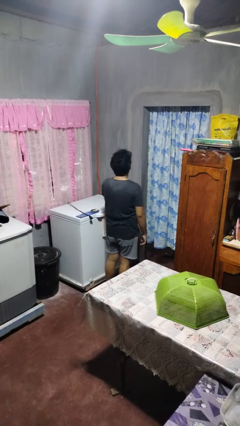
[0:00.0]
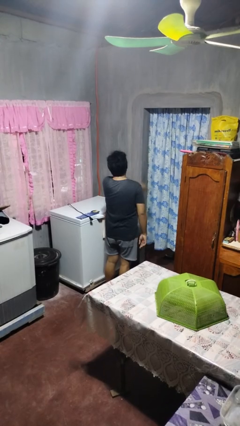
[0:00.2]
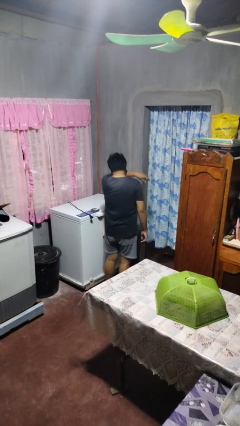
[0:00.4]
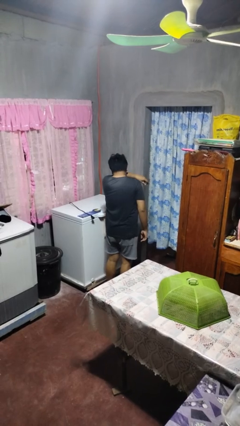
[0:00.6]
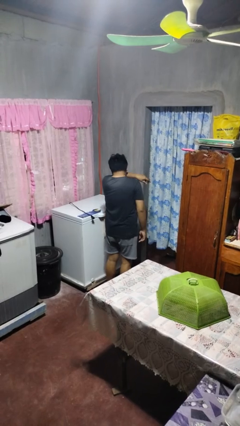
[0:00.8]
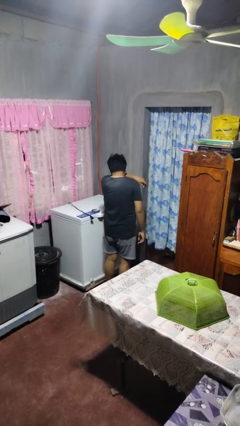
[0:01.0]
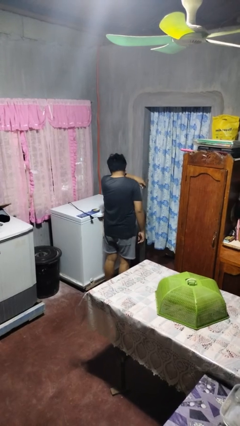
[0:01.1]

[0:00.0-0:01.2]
person sneezes into arm

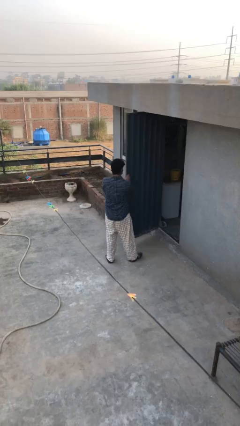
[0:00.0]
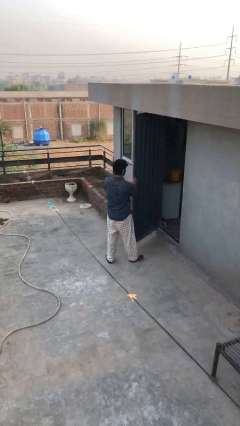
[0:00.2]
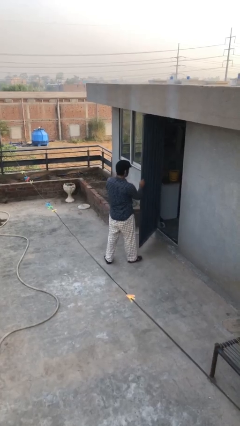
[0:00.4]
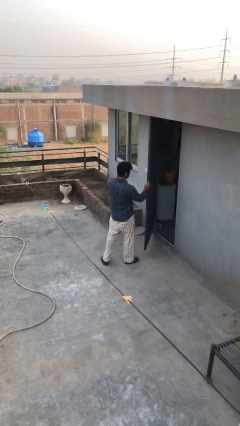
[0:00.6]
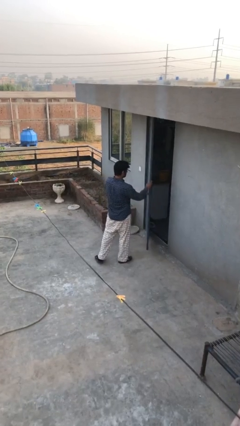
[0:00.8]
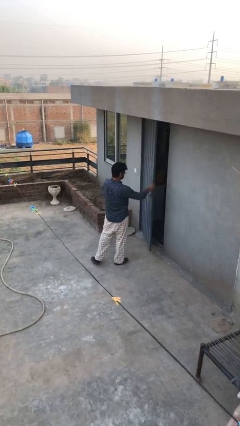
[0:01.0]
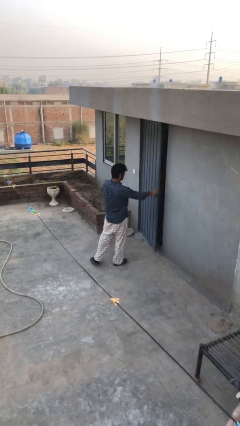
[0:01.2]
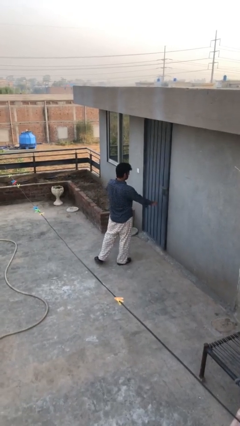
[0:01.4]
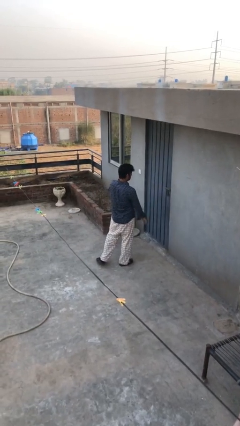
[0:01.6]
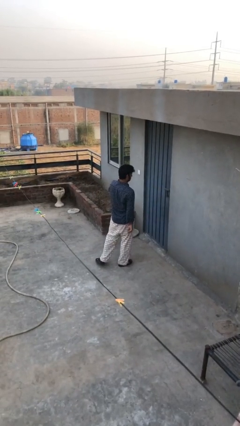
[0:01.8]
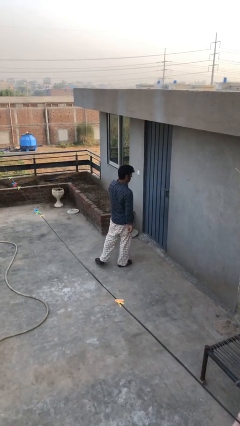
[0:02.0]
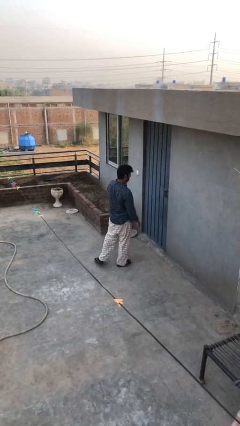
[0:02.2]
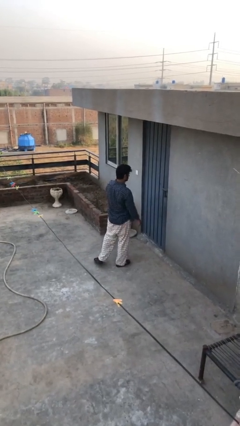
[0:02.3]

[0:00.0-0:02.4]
person closes facility door

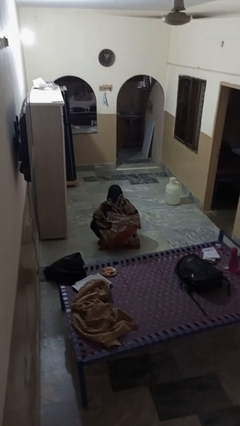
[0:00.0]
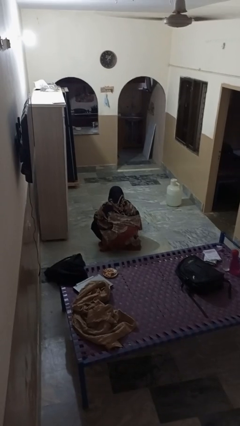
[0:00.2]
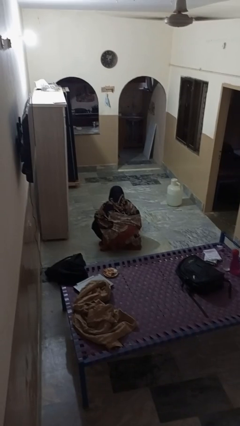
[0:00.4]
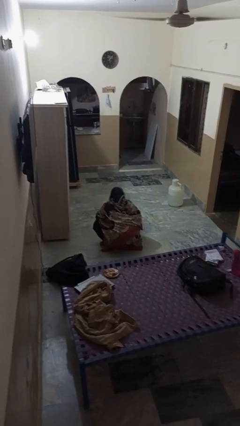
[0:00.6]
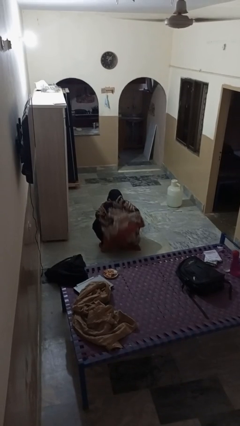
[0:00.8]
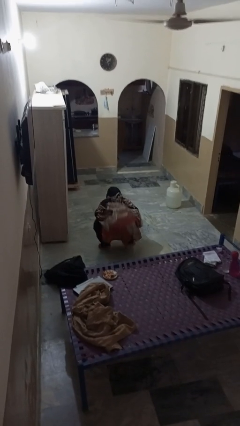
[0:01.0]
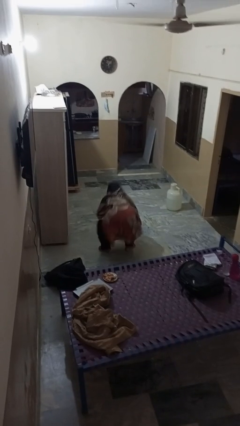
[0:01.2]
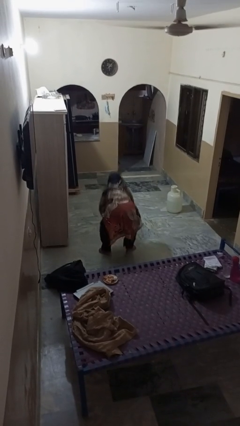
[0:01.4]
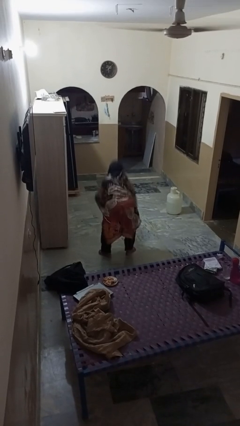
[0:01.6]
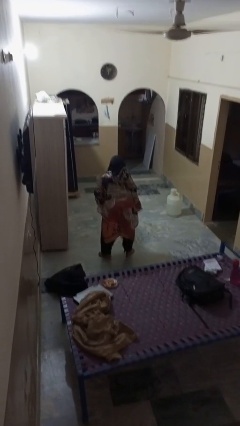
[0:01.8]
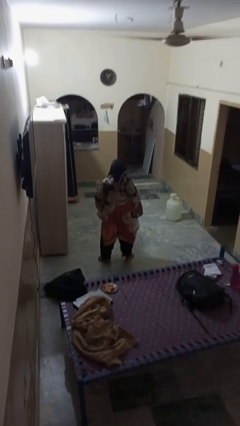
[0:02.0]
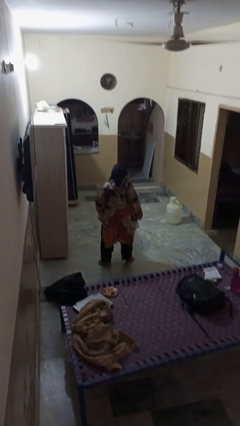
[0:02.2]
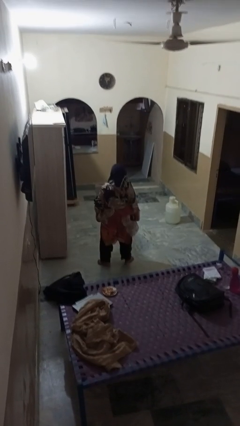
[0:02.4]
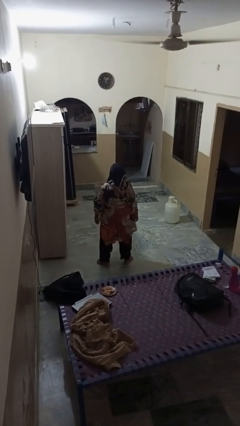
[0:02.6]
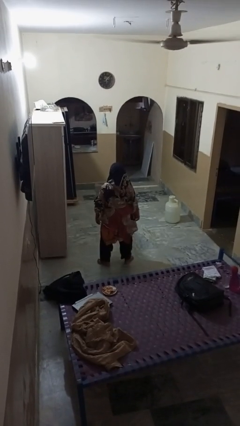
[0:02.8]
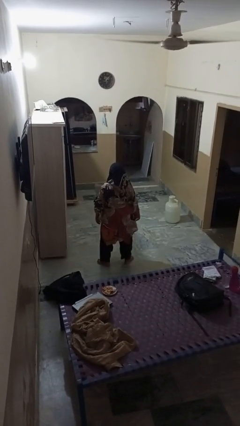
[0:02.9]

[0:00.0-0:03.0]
person stands up

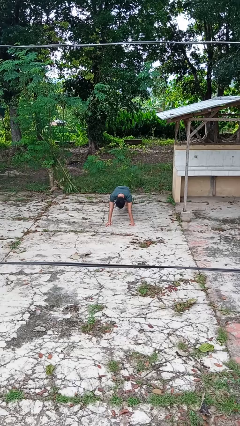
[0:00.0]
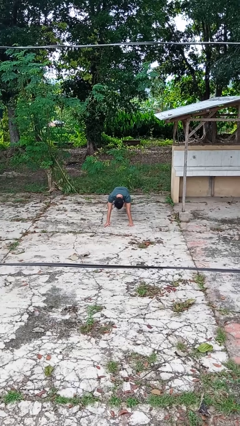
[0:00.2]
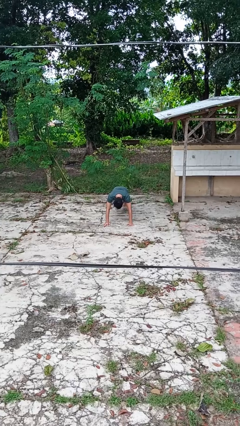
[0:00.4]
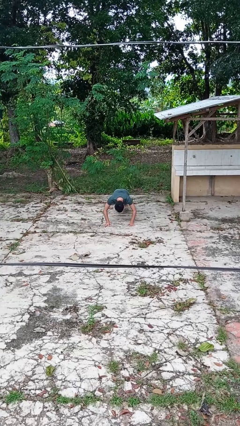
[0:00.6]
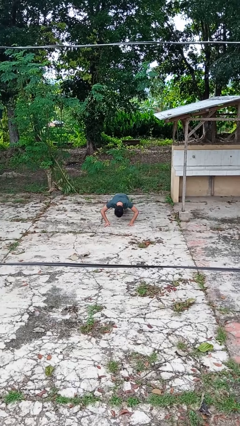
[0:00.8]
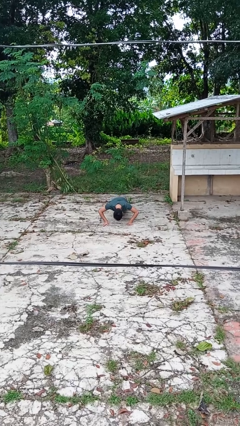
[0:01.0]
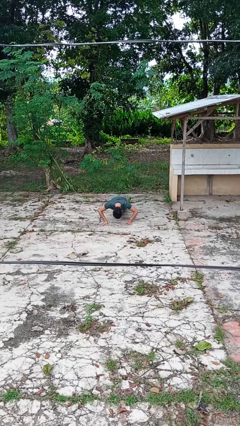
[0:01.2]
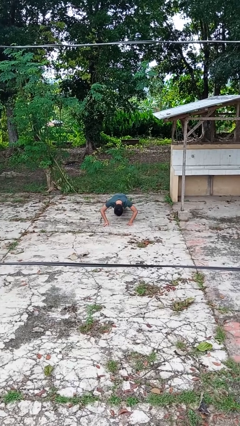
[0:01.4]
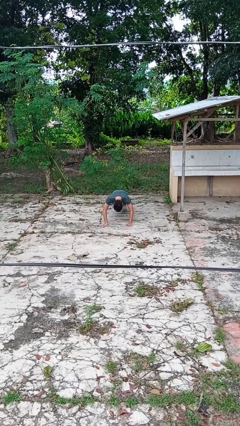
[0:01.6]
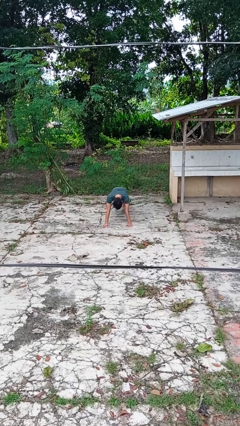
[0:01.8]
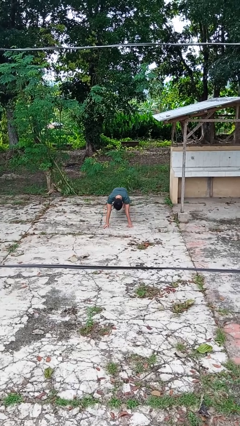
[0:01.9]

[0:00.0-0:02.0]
person exercises with pushup

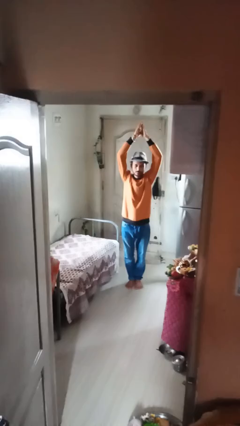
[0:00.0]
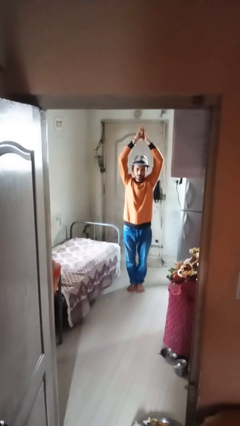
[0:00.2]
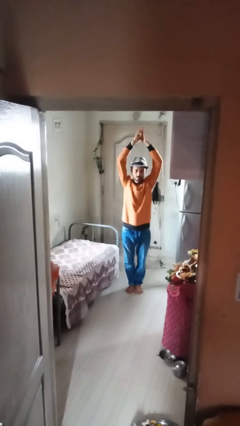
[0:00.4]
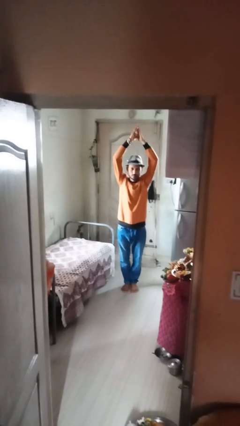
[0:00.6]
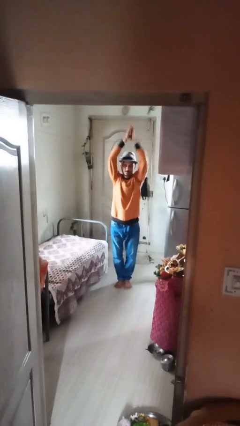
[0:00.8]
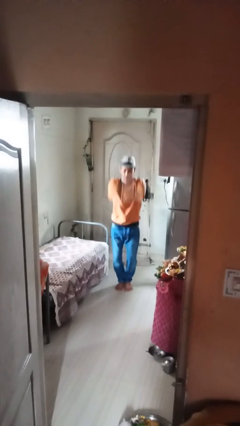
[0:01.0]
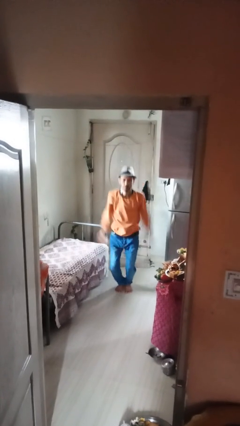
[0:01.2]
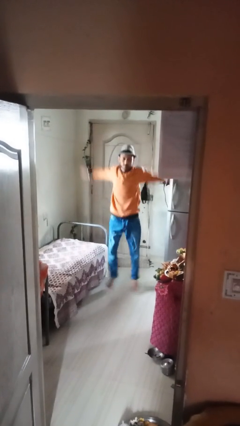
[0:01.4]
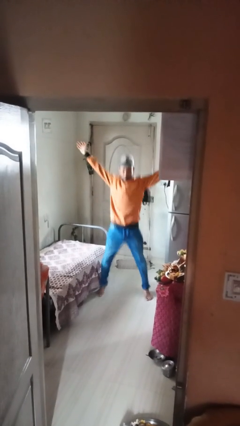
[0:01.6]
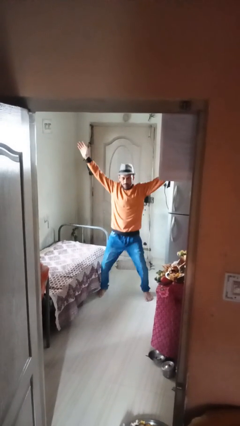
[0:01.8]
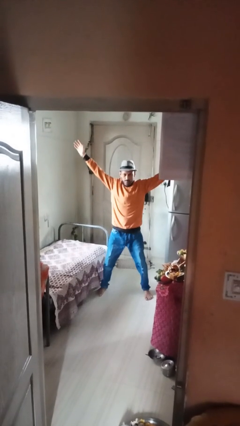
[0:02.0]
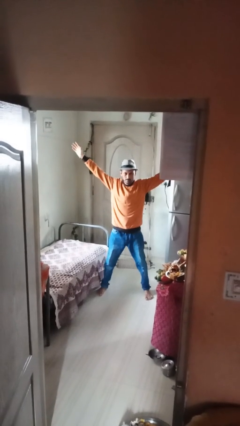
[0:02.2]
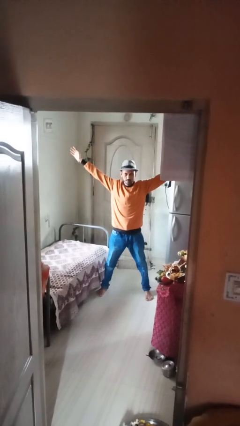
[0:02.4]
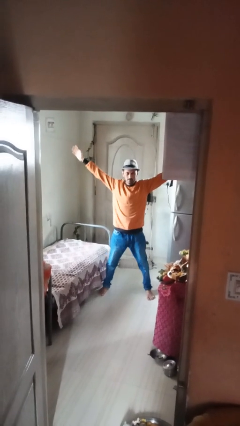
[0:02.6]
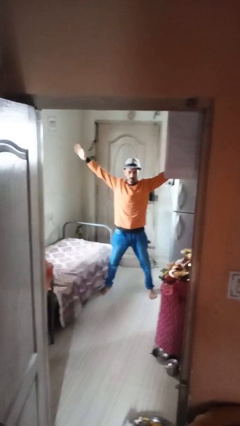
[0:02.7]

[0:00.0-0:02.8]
person exercises with jumping jacks

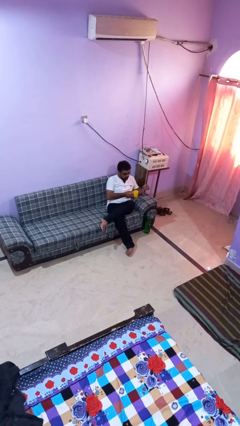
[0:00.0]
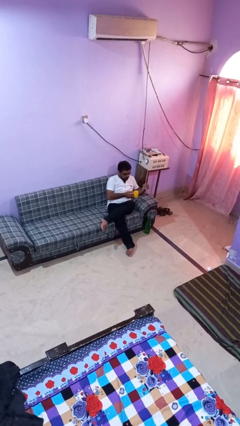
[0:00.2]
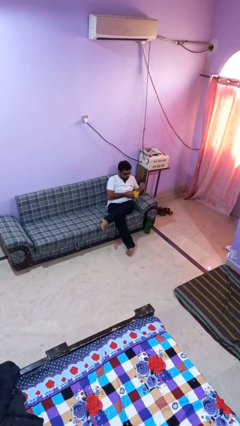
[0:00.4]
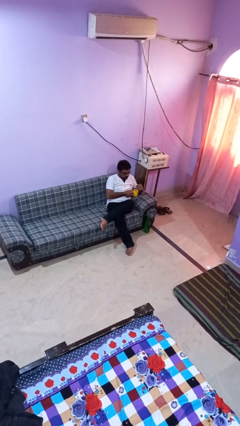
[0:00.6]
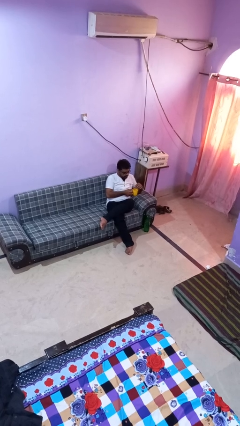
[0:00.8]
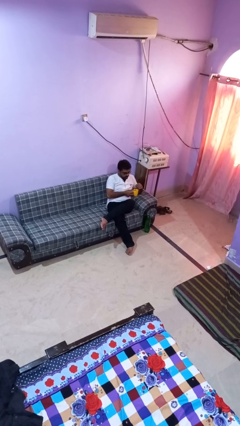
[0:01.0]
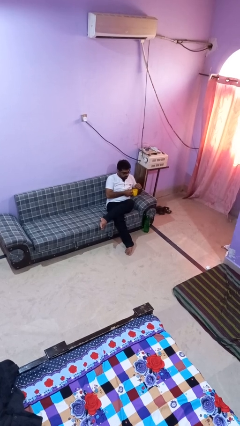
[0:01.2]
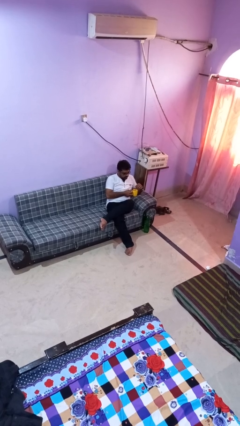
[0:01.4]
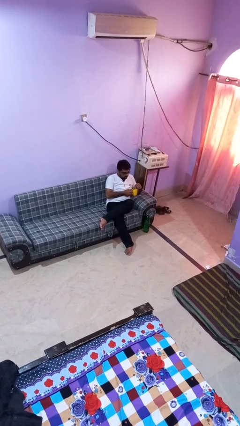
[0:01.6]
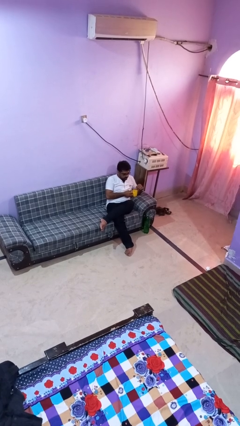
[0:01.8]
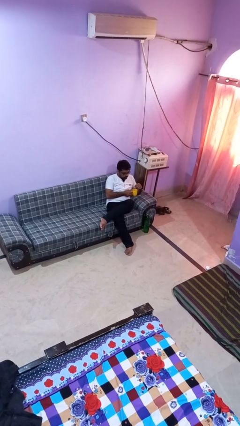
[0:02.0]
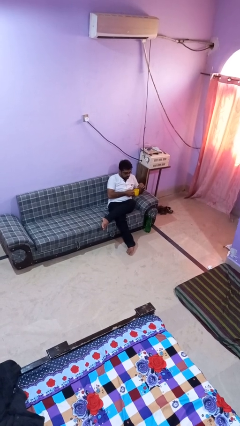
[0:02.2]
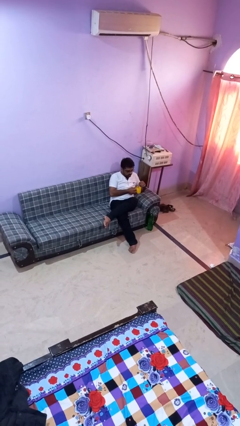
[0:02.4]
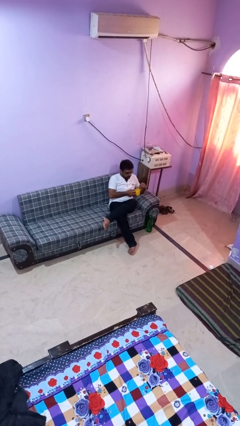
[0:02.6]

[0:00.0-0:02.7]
person stirs mug

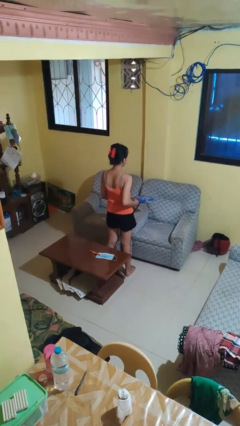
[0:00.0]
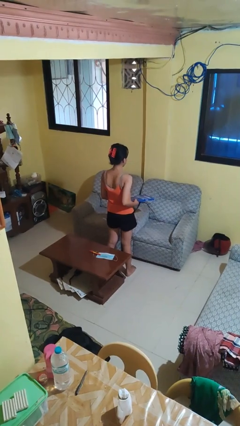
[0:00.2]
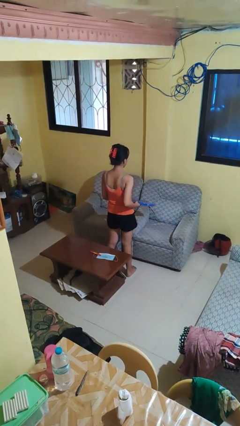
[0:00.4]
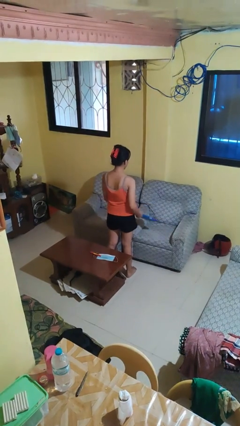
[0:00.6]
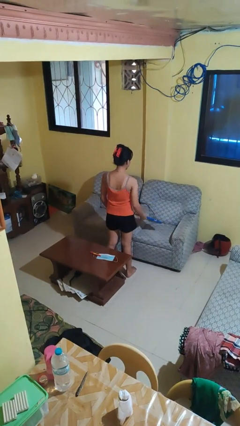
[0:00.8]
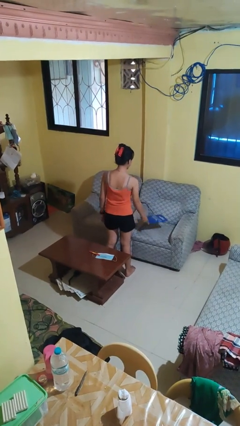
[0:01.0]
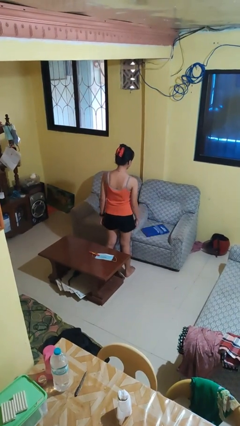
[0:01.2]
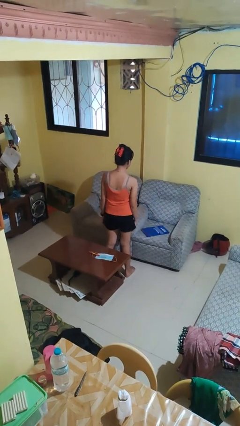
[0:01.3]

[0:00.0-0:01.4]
person puts down object on couch

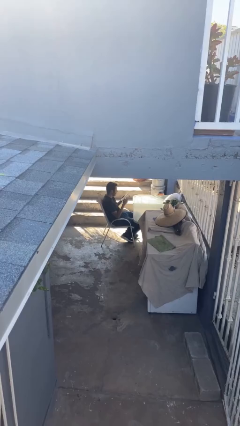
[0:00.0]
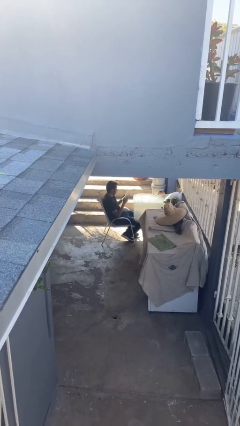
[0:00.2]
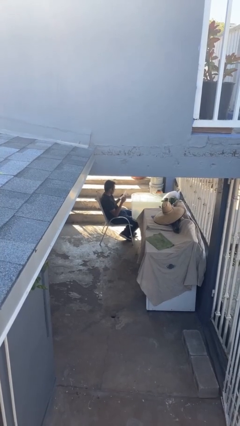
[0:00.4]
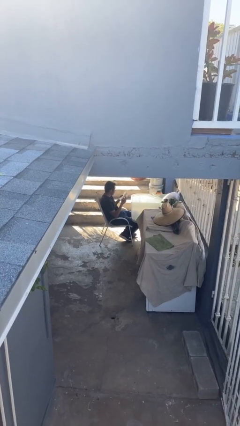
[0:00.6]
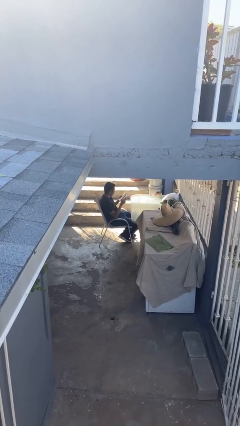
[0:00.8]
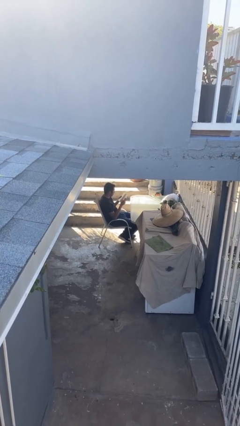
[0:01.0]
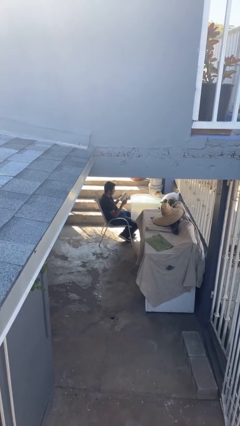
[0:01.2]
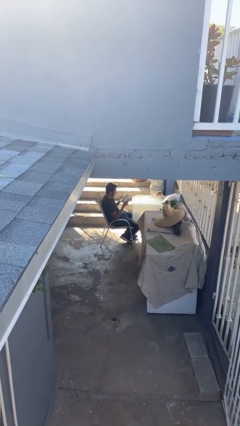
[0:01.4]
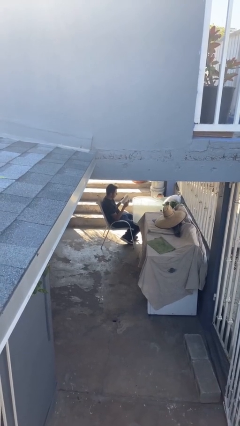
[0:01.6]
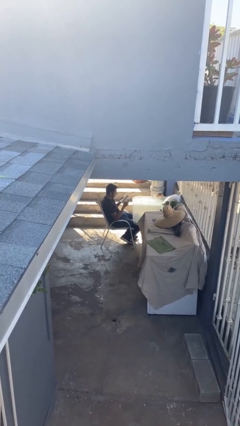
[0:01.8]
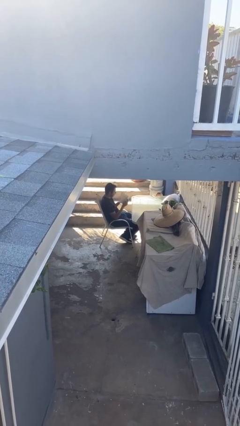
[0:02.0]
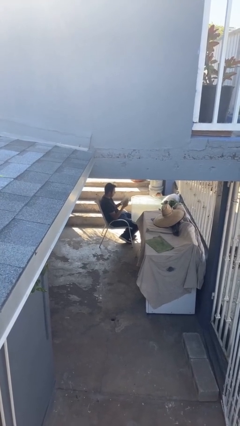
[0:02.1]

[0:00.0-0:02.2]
person reads document
